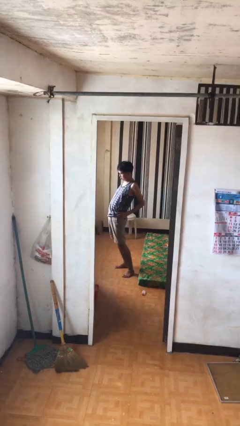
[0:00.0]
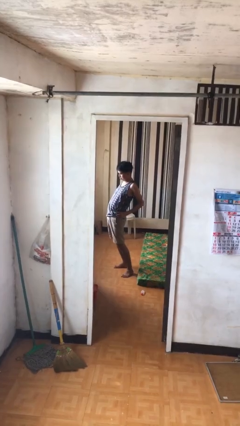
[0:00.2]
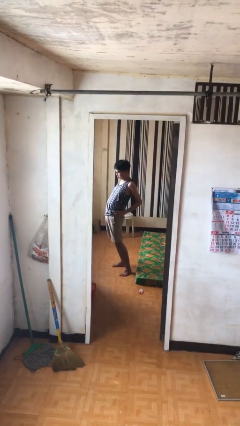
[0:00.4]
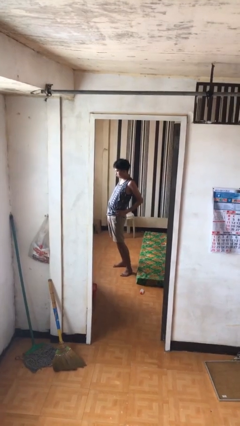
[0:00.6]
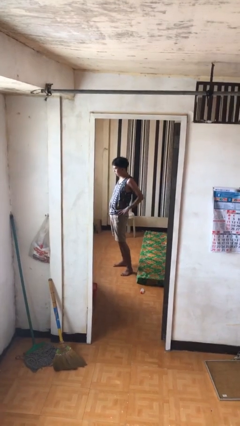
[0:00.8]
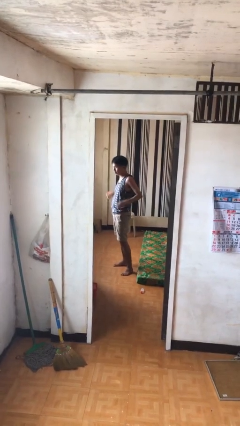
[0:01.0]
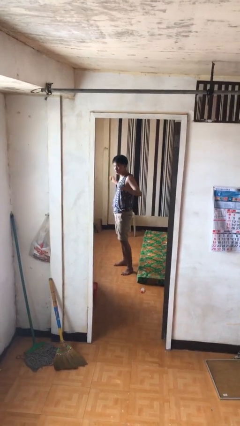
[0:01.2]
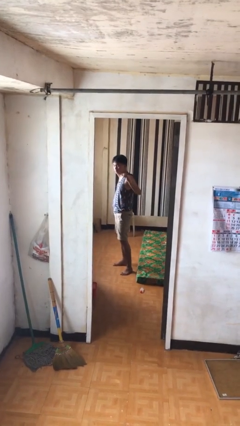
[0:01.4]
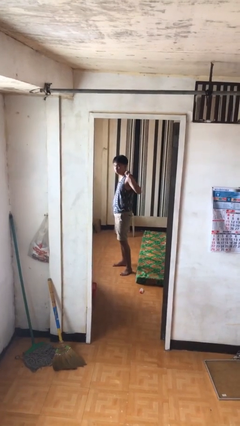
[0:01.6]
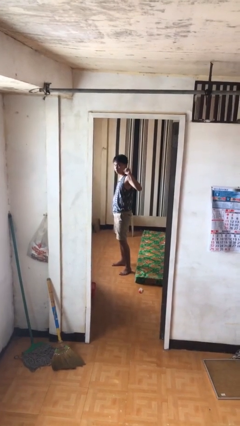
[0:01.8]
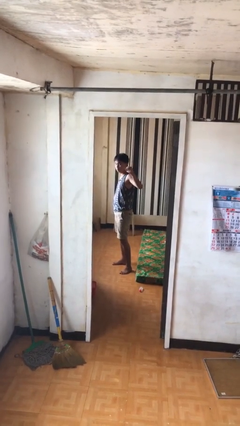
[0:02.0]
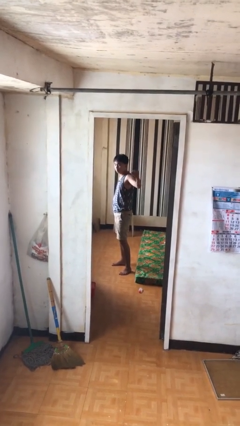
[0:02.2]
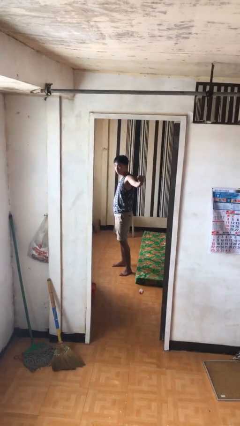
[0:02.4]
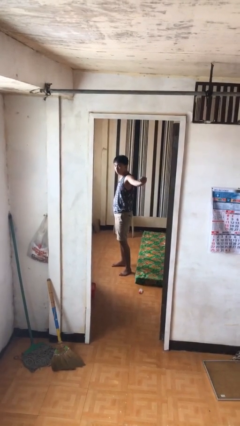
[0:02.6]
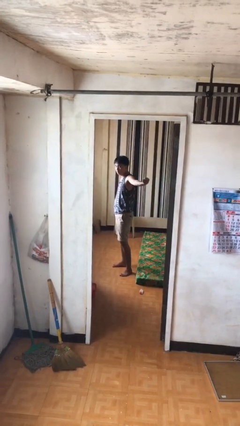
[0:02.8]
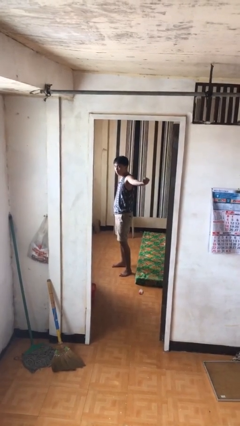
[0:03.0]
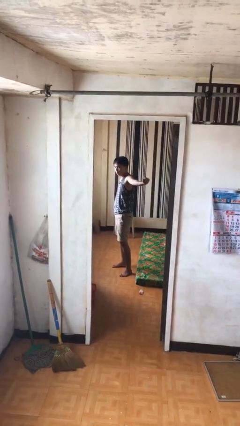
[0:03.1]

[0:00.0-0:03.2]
person stretches arms to side

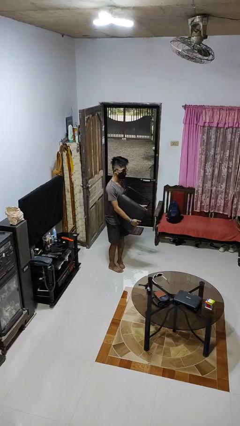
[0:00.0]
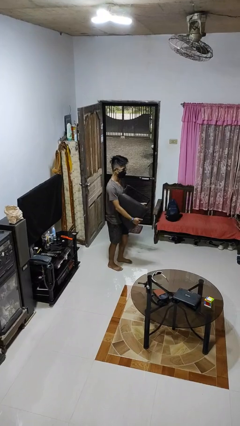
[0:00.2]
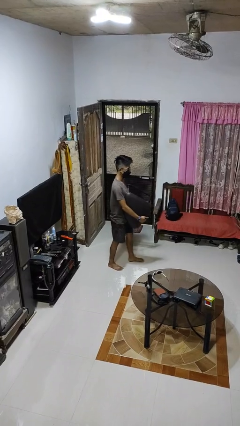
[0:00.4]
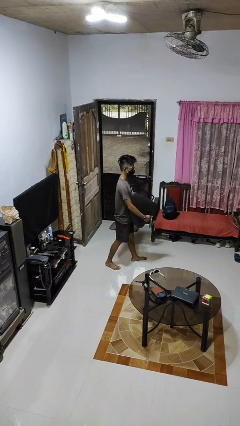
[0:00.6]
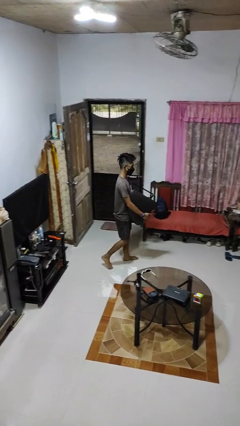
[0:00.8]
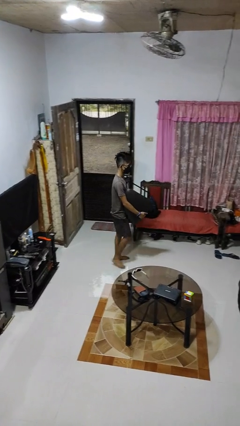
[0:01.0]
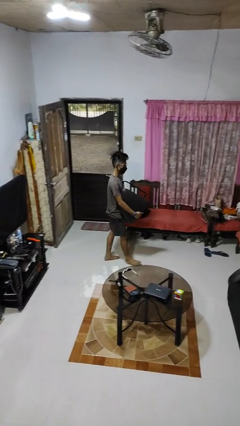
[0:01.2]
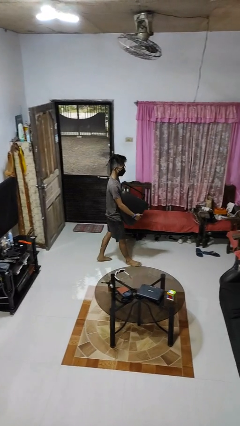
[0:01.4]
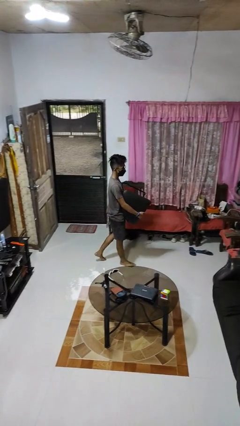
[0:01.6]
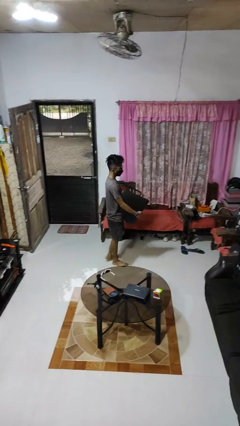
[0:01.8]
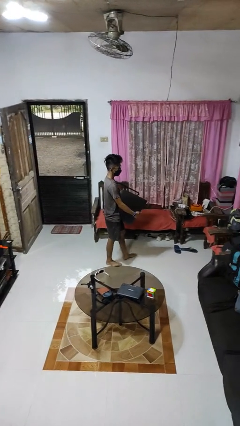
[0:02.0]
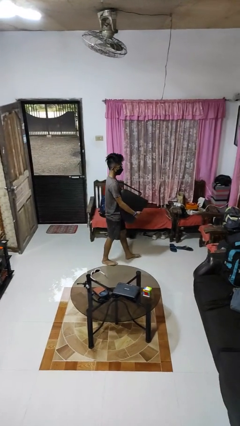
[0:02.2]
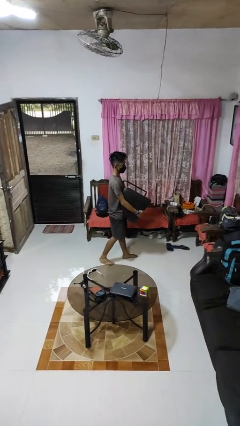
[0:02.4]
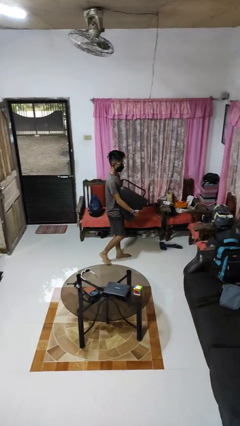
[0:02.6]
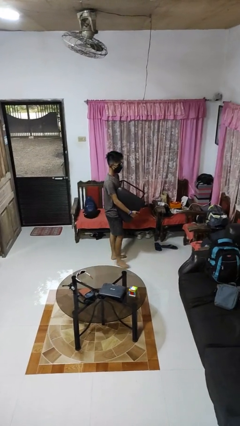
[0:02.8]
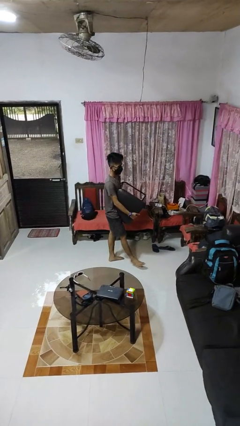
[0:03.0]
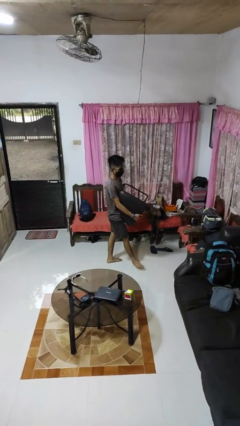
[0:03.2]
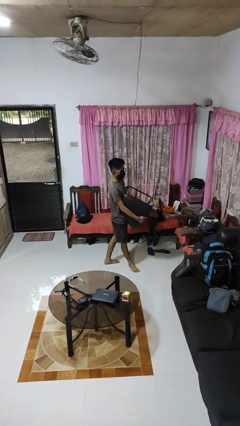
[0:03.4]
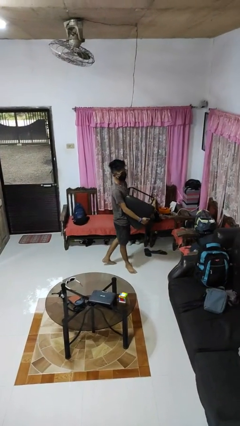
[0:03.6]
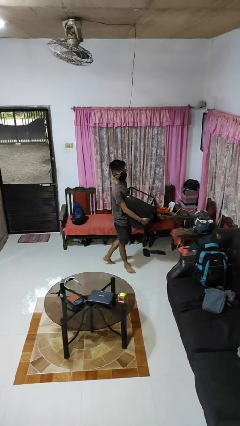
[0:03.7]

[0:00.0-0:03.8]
person carries furniture

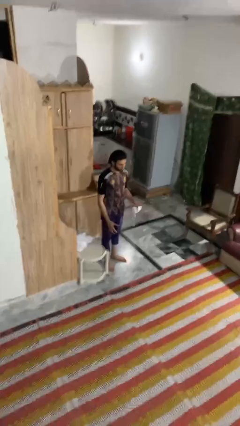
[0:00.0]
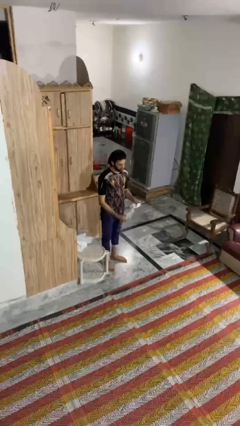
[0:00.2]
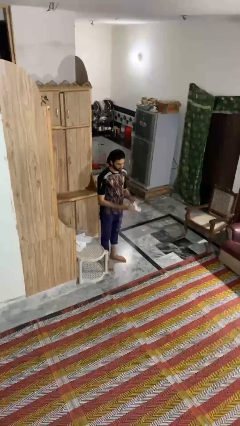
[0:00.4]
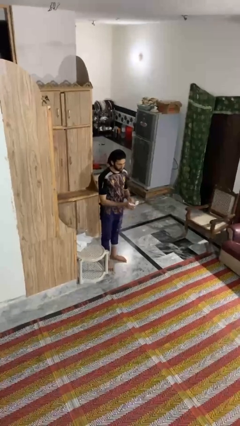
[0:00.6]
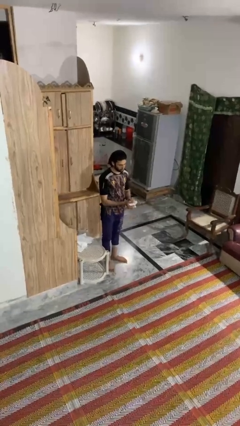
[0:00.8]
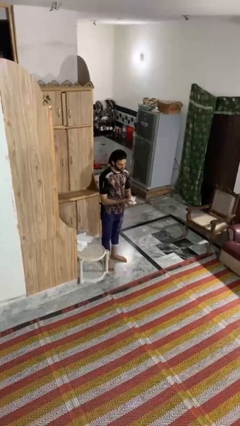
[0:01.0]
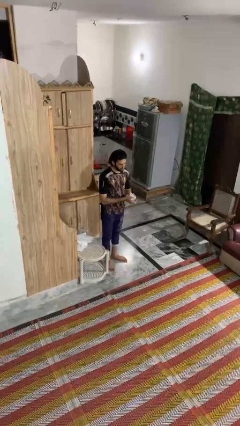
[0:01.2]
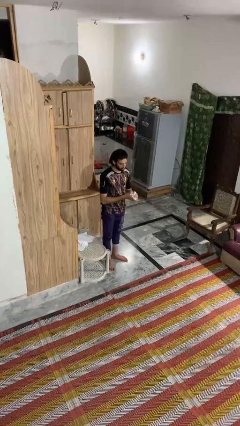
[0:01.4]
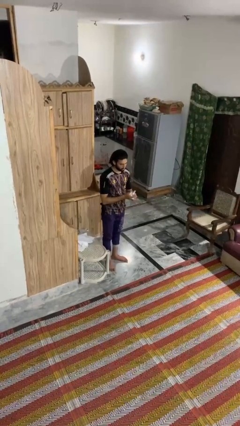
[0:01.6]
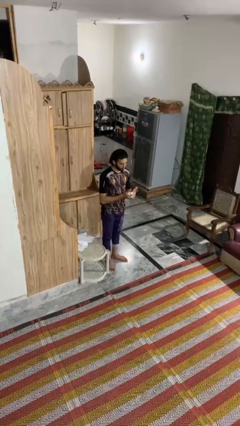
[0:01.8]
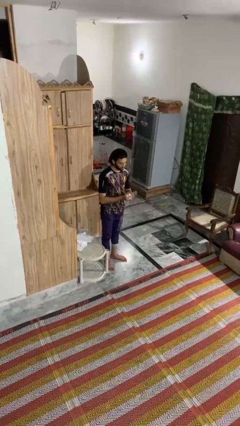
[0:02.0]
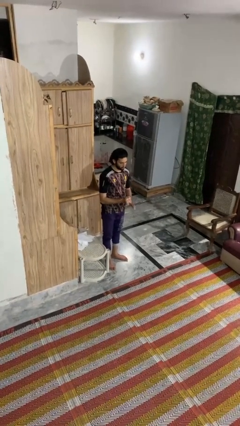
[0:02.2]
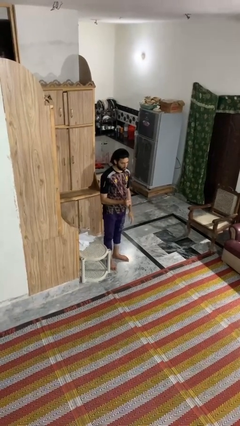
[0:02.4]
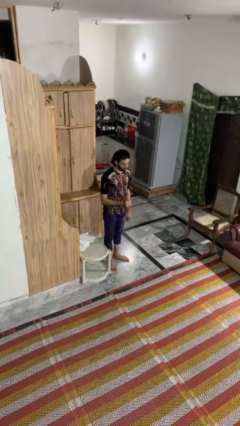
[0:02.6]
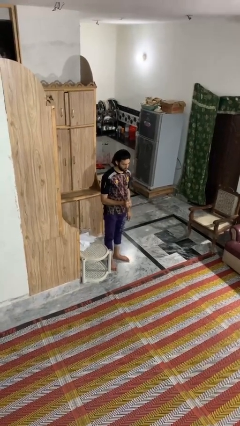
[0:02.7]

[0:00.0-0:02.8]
person crumples paper

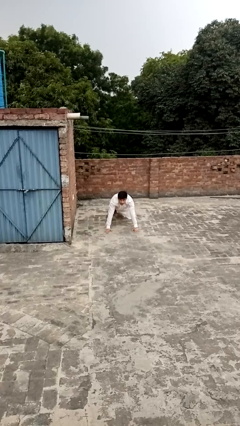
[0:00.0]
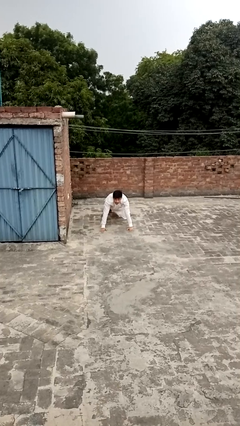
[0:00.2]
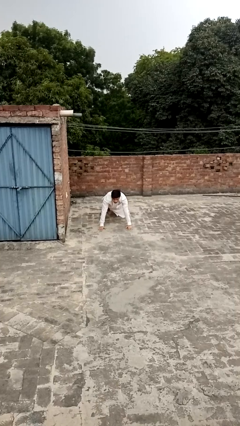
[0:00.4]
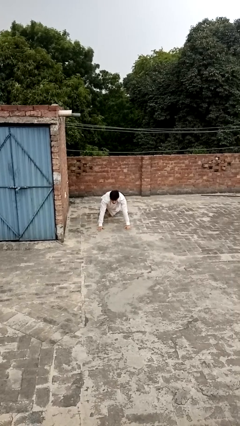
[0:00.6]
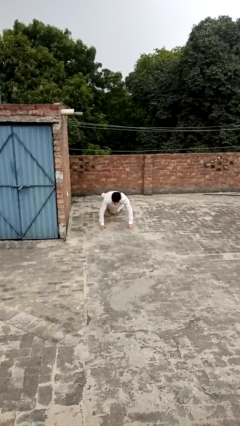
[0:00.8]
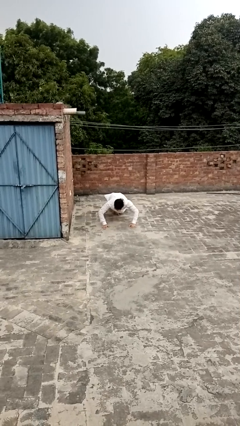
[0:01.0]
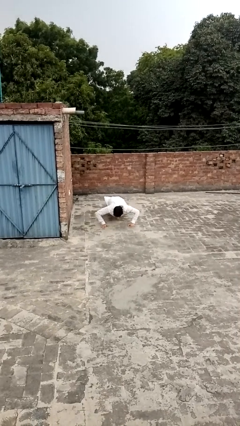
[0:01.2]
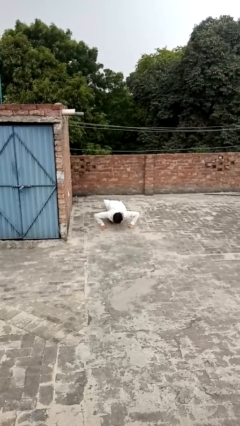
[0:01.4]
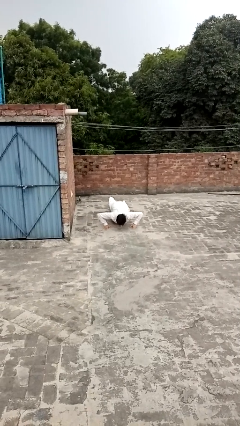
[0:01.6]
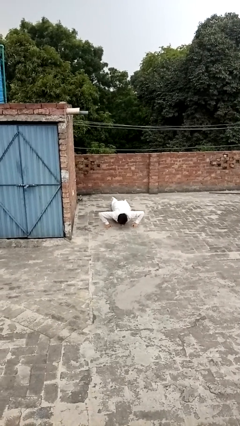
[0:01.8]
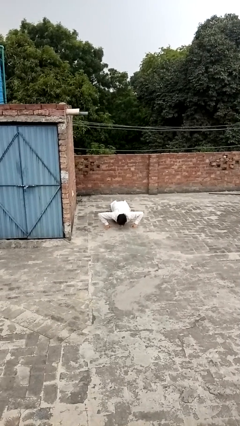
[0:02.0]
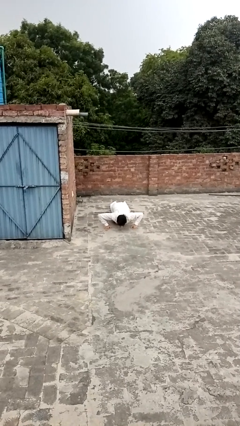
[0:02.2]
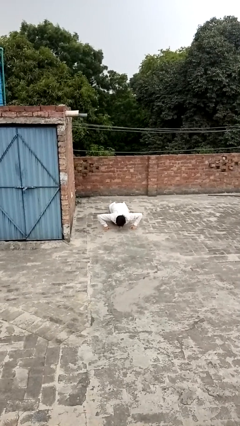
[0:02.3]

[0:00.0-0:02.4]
person exercises with pushup

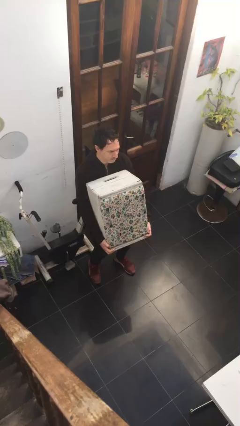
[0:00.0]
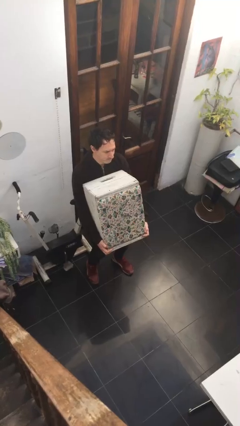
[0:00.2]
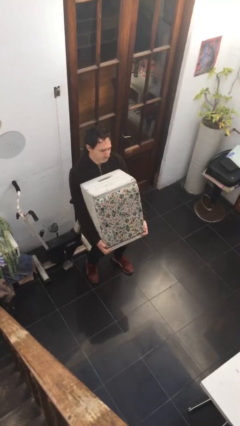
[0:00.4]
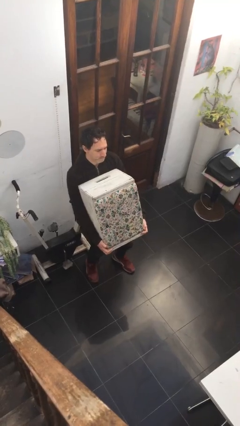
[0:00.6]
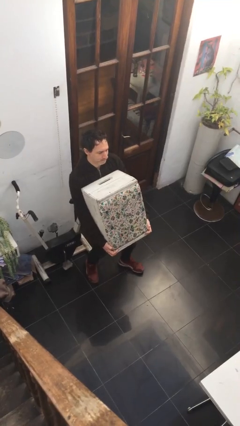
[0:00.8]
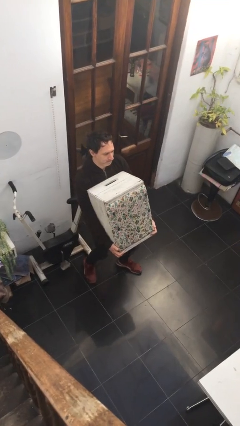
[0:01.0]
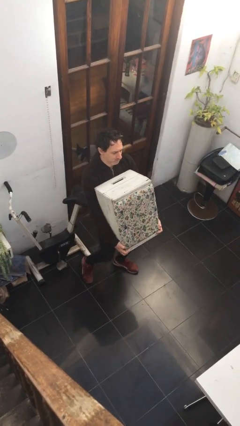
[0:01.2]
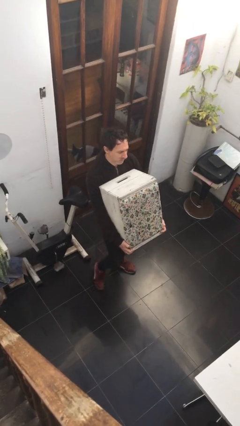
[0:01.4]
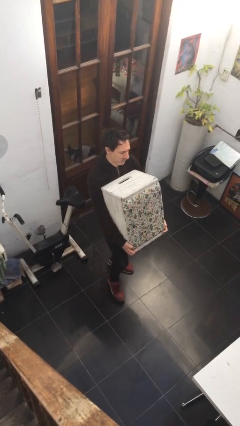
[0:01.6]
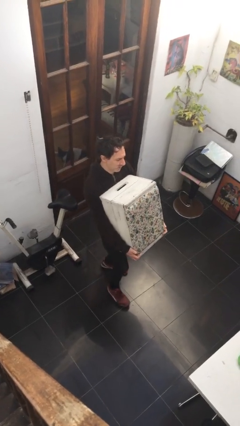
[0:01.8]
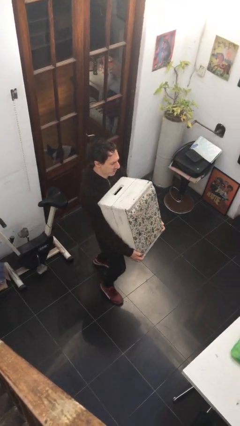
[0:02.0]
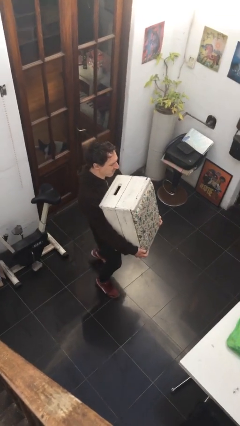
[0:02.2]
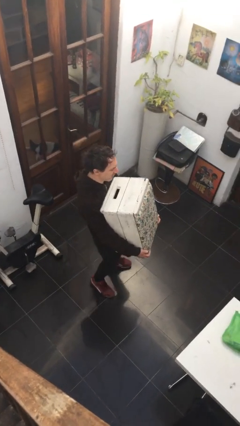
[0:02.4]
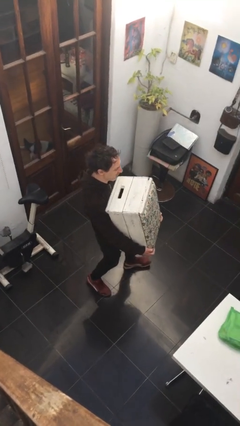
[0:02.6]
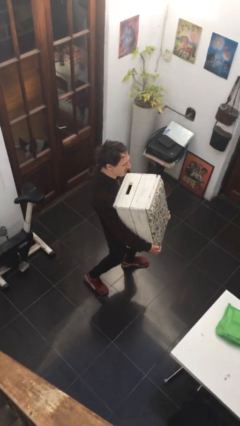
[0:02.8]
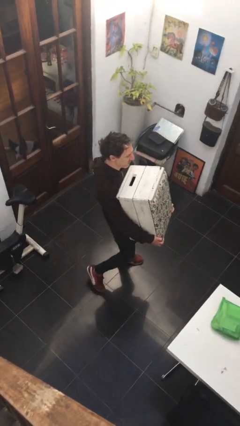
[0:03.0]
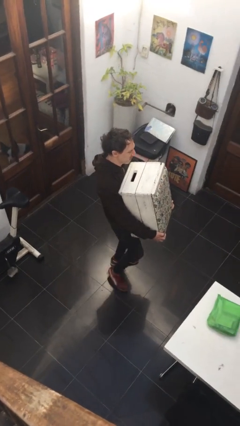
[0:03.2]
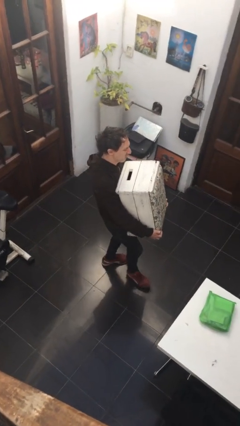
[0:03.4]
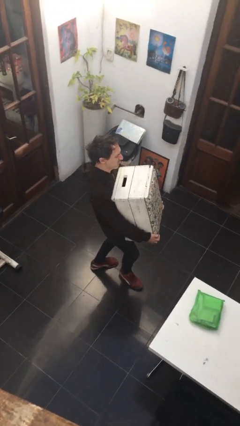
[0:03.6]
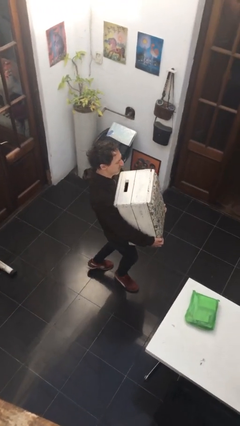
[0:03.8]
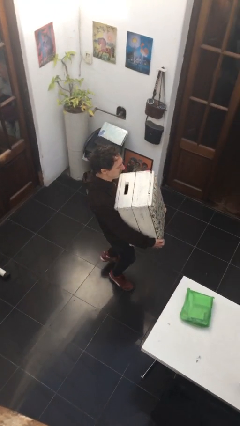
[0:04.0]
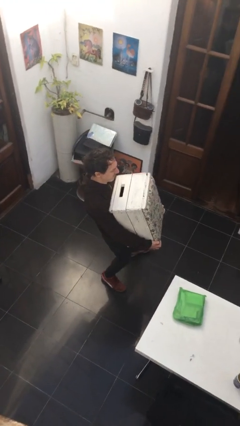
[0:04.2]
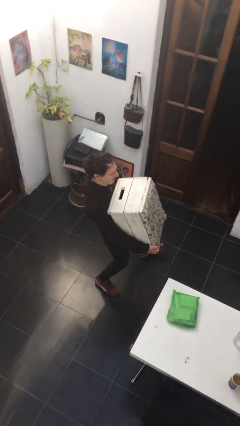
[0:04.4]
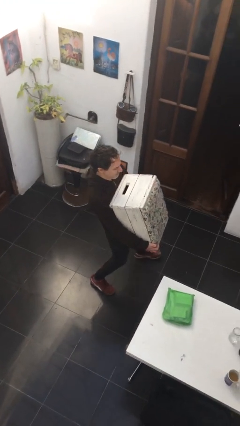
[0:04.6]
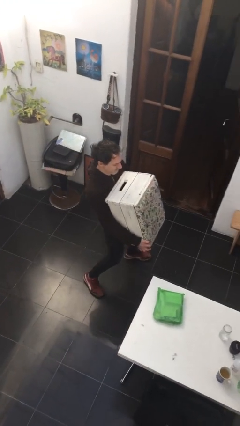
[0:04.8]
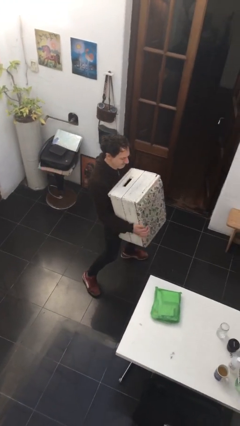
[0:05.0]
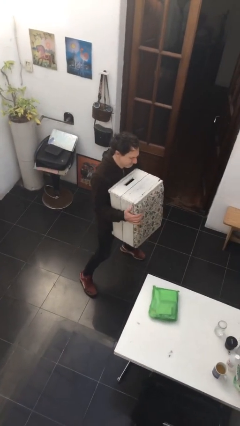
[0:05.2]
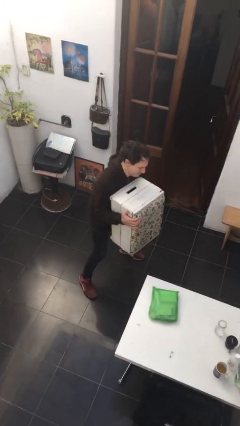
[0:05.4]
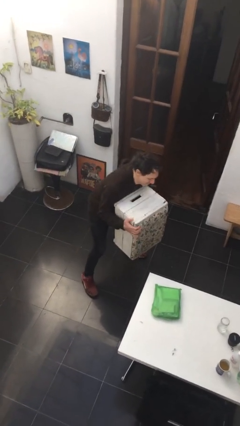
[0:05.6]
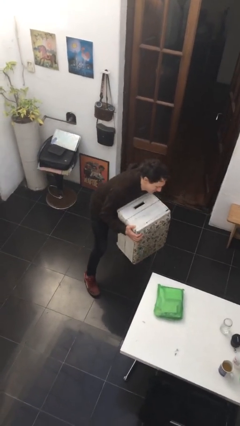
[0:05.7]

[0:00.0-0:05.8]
person carries heavy object
